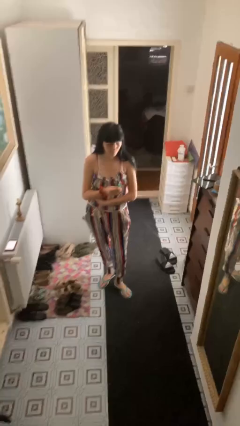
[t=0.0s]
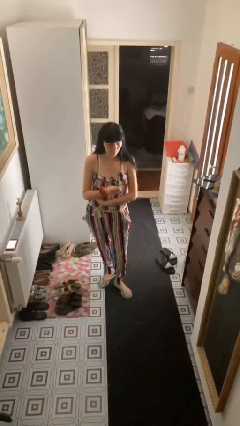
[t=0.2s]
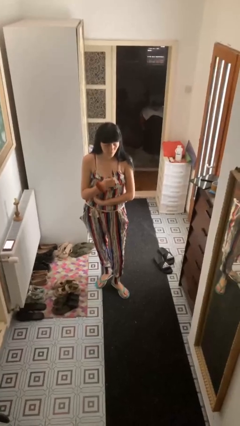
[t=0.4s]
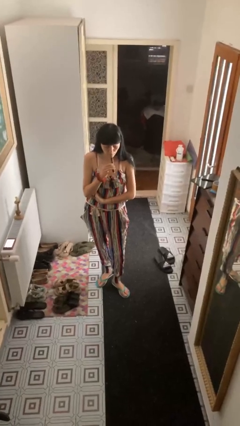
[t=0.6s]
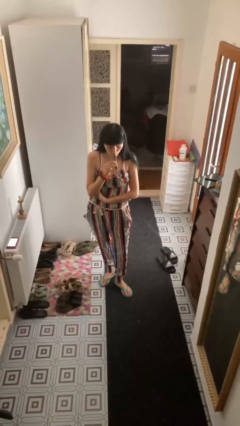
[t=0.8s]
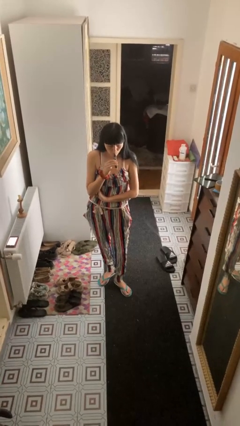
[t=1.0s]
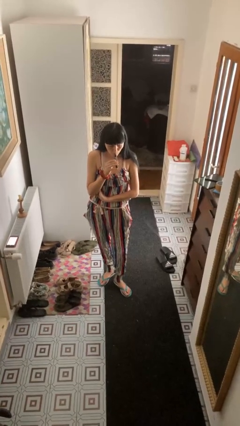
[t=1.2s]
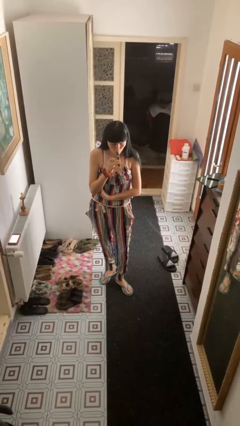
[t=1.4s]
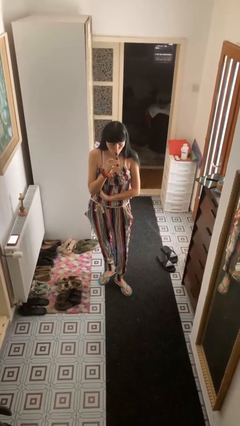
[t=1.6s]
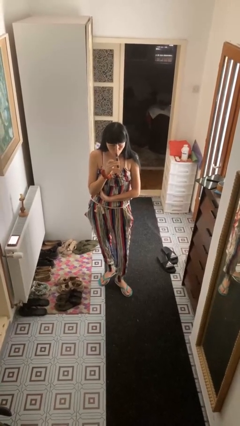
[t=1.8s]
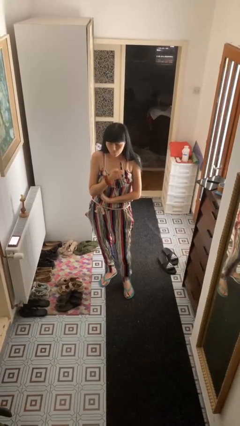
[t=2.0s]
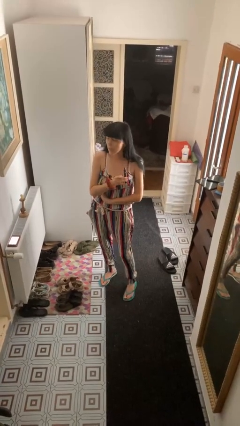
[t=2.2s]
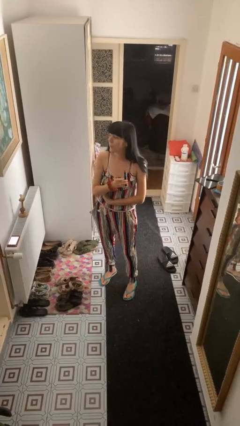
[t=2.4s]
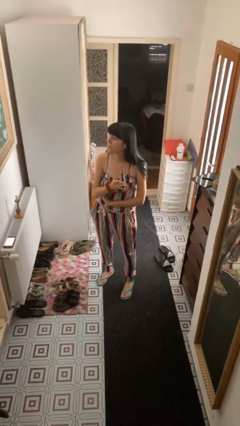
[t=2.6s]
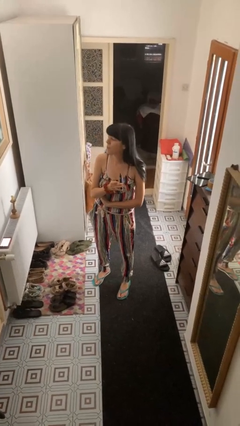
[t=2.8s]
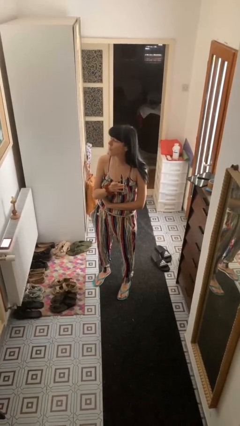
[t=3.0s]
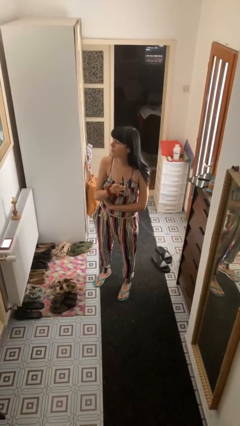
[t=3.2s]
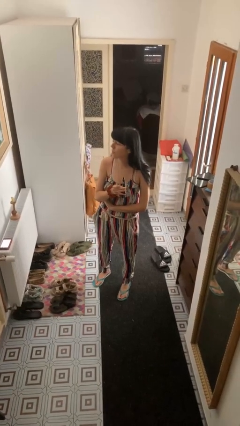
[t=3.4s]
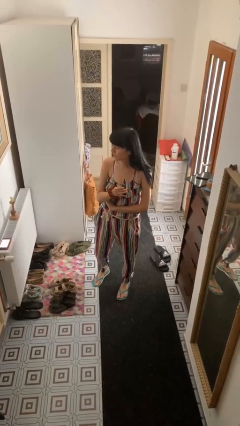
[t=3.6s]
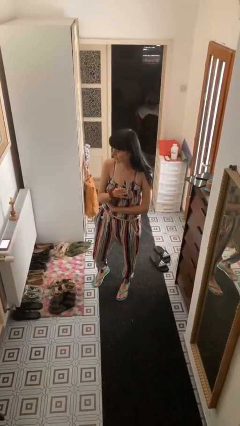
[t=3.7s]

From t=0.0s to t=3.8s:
person vapes

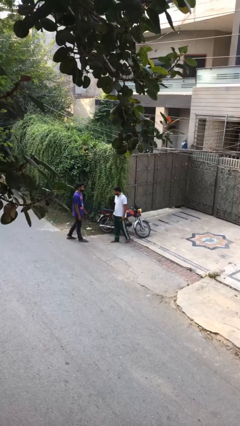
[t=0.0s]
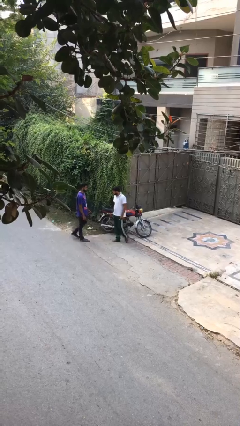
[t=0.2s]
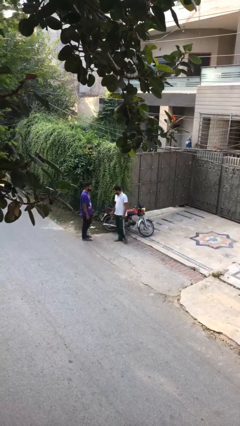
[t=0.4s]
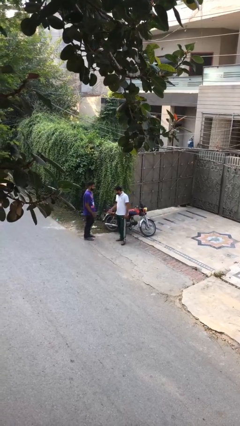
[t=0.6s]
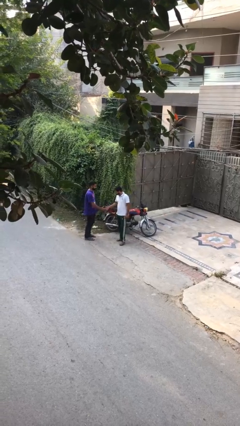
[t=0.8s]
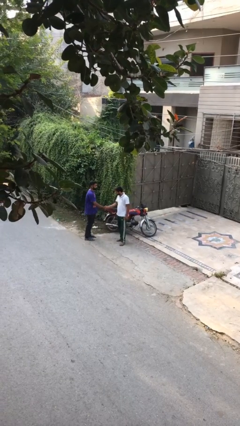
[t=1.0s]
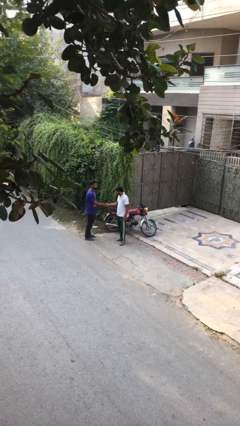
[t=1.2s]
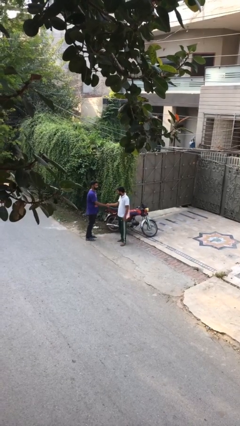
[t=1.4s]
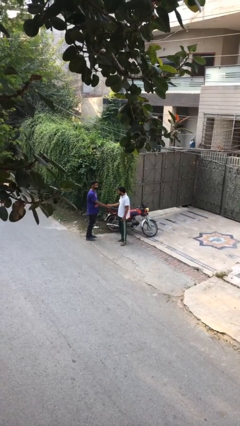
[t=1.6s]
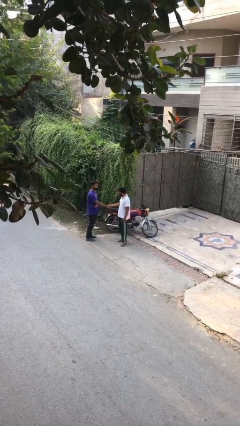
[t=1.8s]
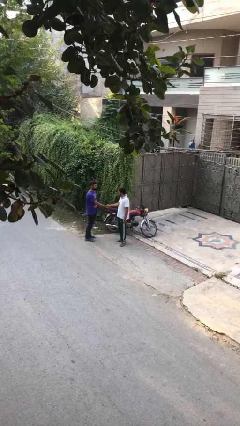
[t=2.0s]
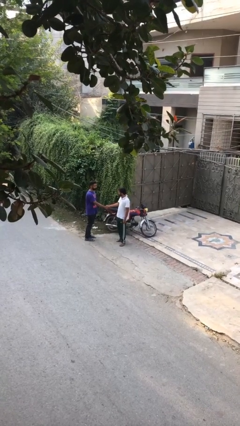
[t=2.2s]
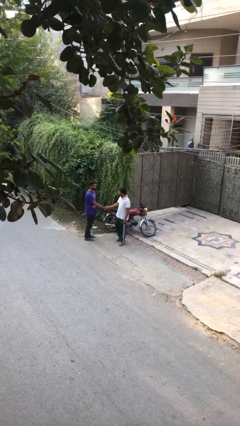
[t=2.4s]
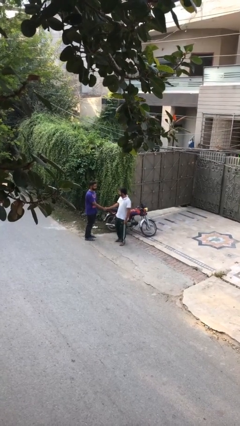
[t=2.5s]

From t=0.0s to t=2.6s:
person shakes hand

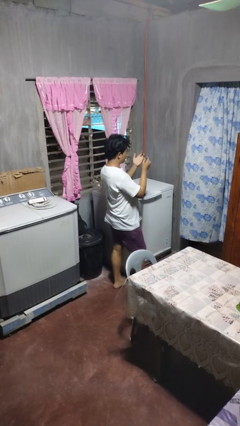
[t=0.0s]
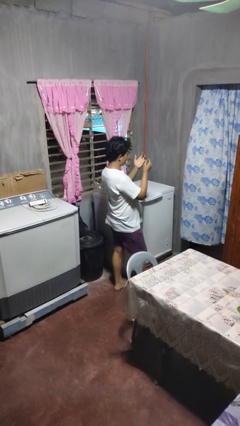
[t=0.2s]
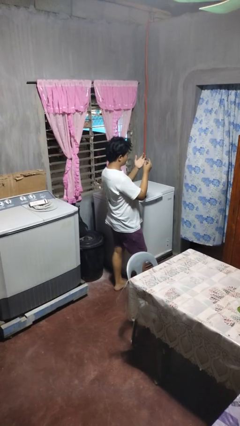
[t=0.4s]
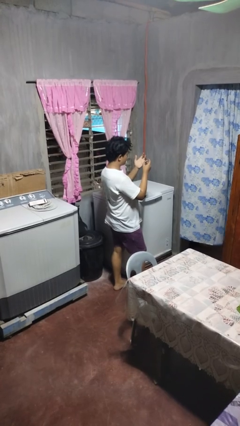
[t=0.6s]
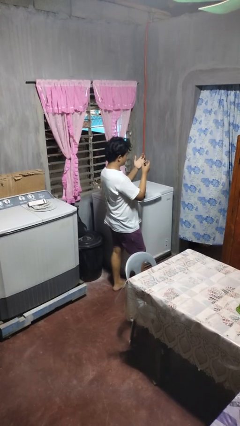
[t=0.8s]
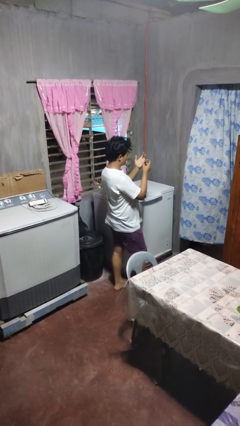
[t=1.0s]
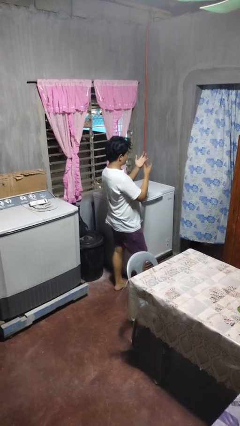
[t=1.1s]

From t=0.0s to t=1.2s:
person puts on ring

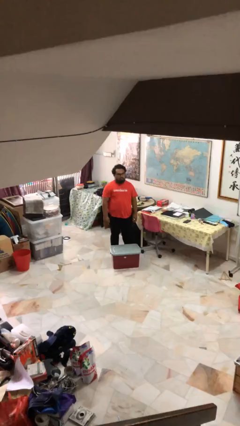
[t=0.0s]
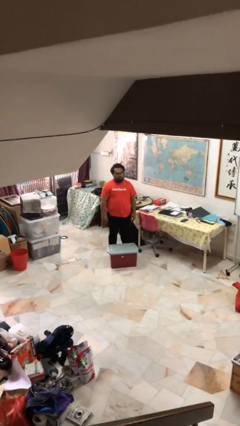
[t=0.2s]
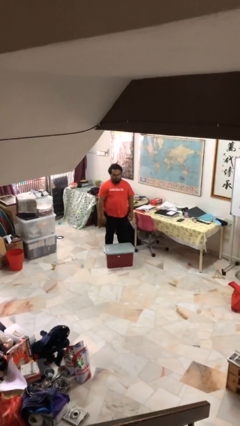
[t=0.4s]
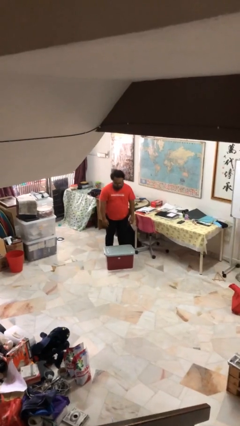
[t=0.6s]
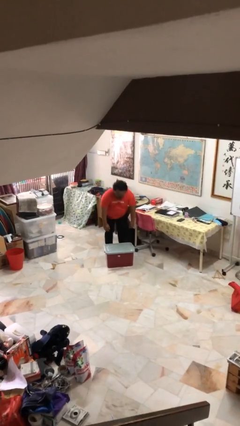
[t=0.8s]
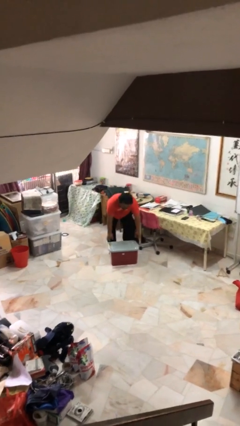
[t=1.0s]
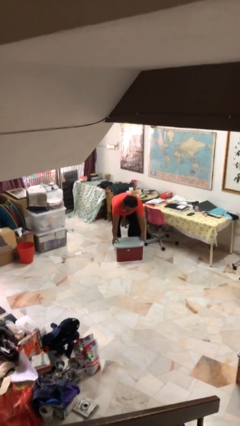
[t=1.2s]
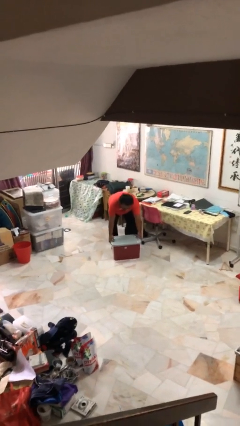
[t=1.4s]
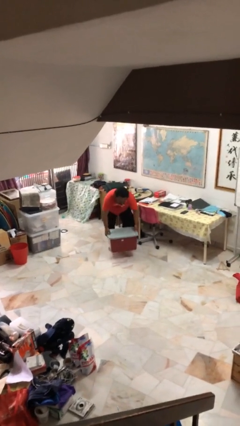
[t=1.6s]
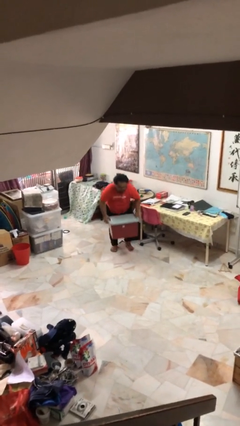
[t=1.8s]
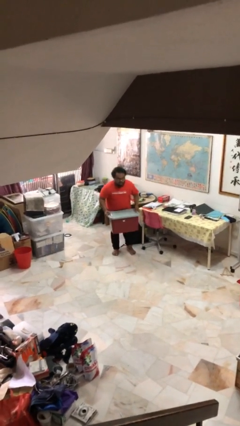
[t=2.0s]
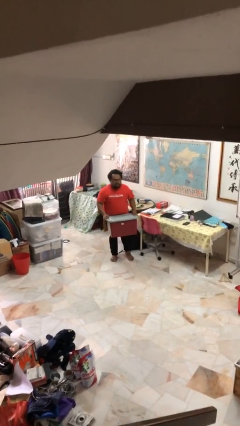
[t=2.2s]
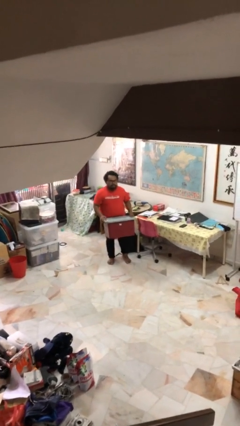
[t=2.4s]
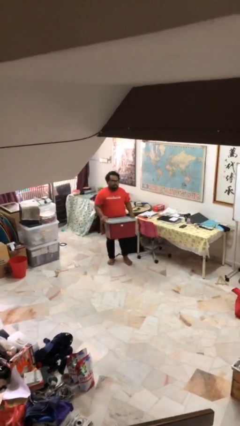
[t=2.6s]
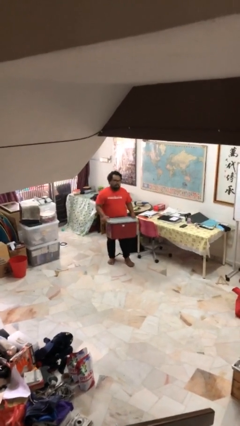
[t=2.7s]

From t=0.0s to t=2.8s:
person picks up object from floor

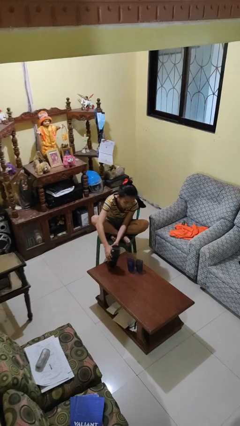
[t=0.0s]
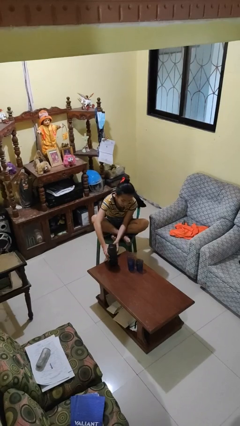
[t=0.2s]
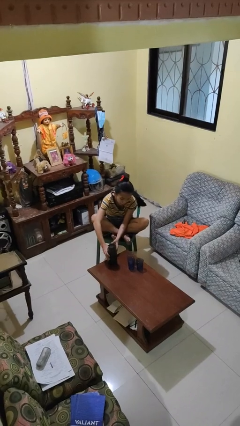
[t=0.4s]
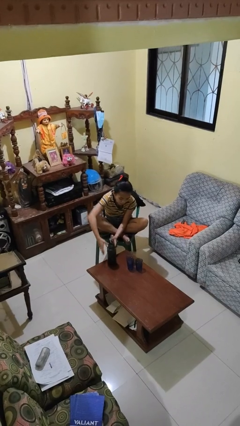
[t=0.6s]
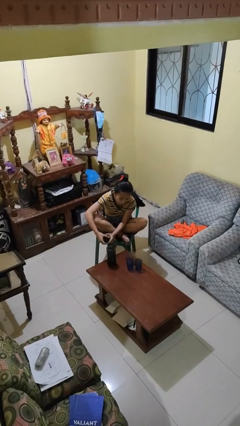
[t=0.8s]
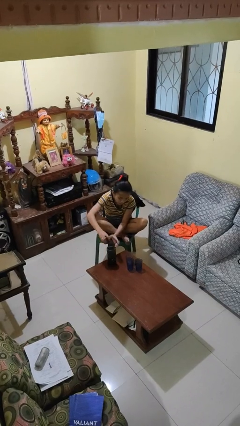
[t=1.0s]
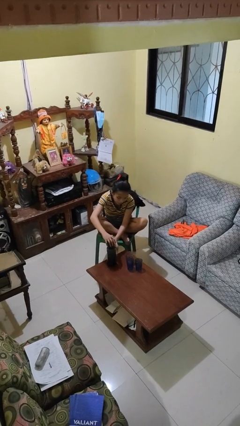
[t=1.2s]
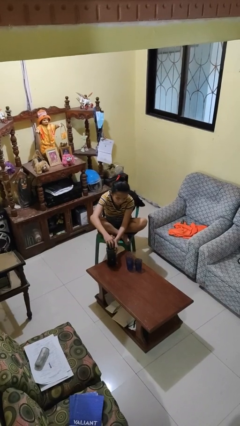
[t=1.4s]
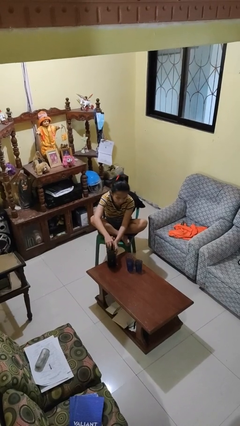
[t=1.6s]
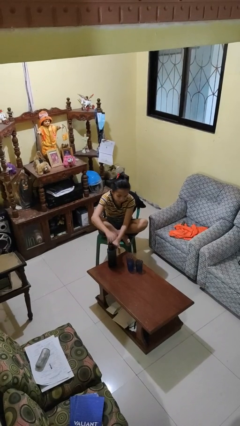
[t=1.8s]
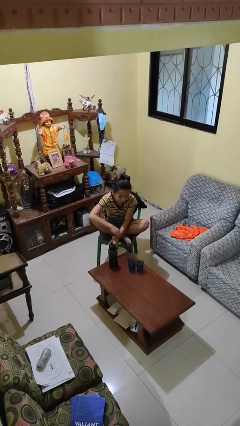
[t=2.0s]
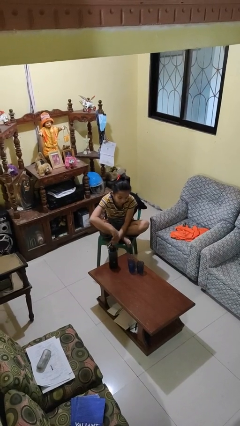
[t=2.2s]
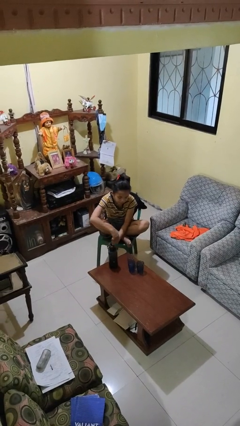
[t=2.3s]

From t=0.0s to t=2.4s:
person screws lid to bottle

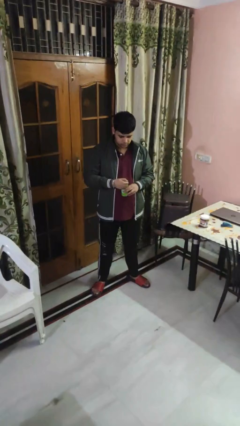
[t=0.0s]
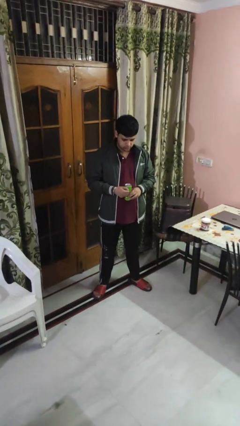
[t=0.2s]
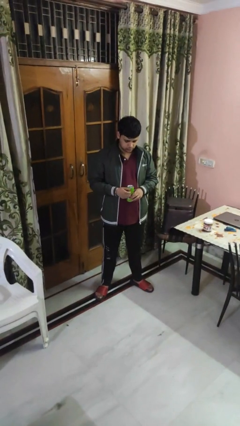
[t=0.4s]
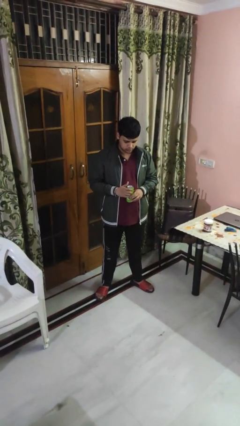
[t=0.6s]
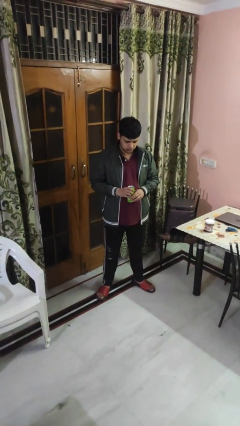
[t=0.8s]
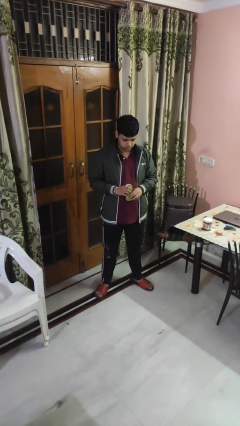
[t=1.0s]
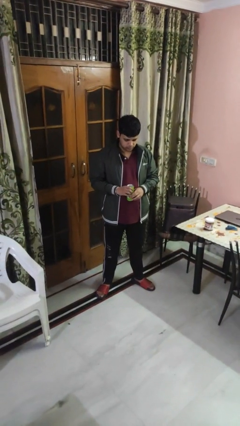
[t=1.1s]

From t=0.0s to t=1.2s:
person opens beverage can

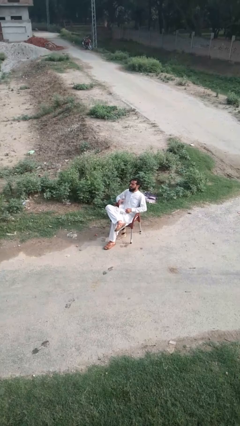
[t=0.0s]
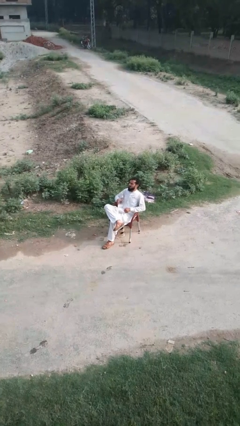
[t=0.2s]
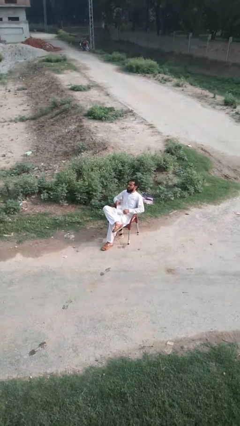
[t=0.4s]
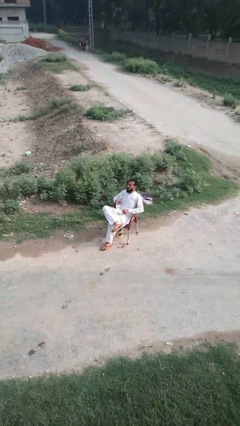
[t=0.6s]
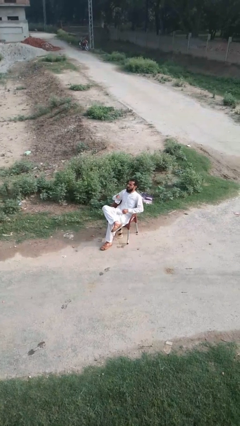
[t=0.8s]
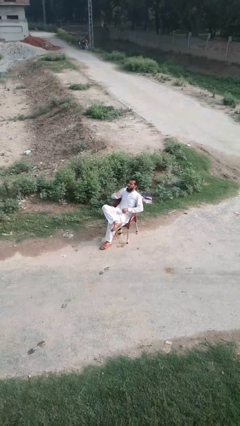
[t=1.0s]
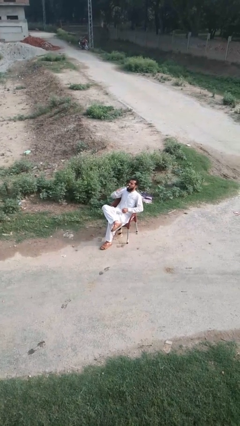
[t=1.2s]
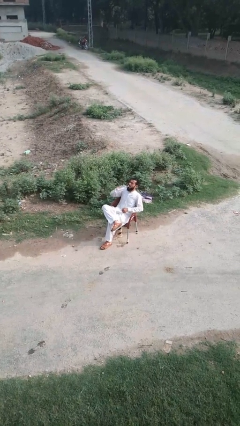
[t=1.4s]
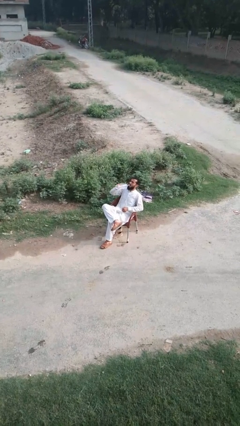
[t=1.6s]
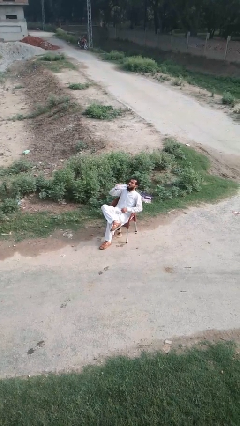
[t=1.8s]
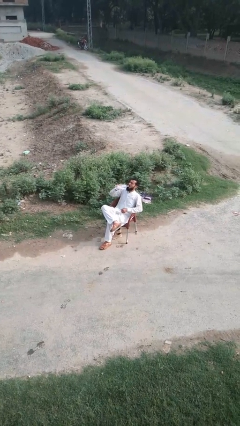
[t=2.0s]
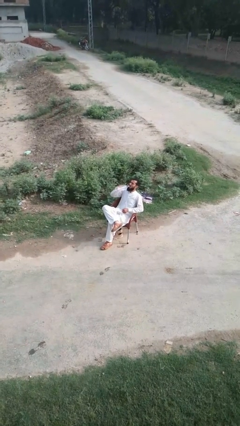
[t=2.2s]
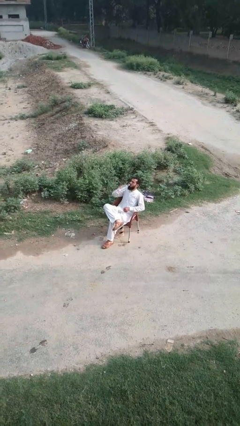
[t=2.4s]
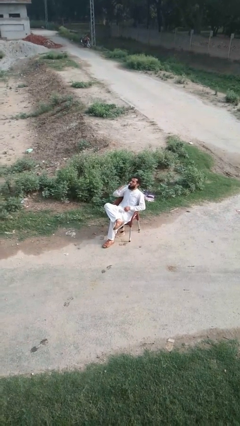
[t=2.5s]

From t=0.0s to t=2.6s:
person drinks from bottle

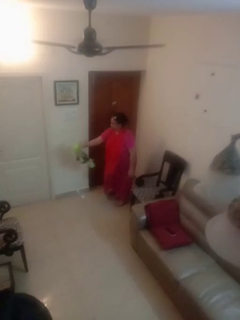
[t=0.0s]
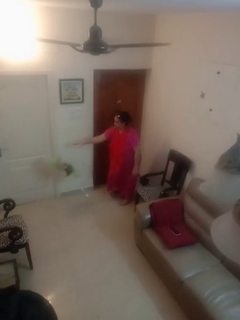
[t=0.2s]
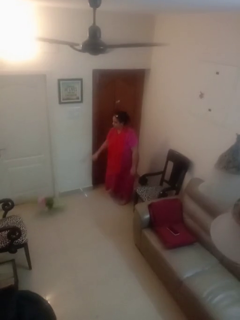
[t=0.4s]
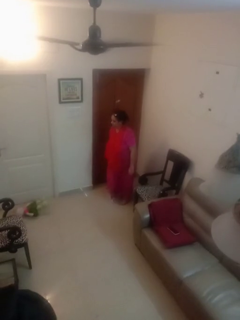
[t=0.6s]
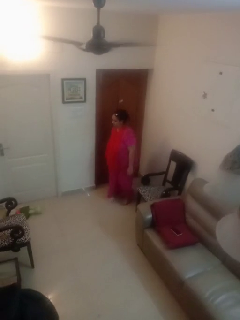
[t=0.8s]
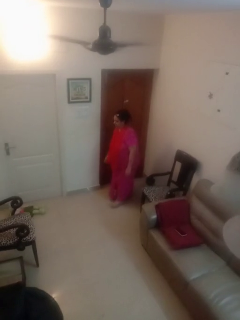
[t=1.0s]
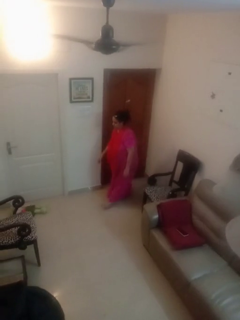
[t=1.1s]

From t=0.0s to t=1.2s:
person throws object to ground
